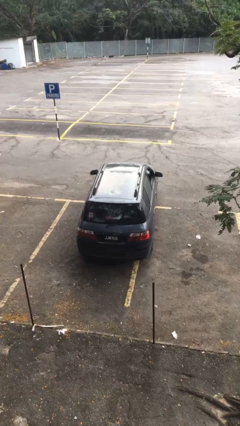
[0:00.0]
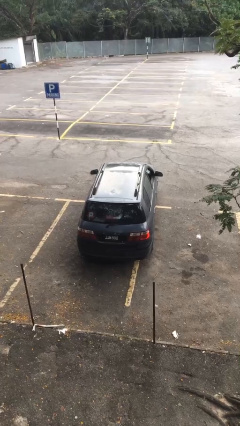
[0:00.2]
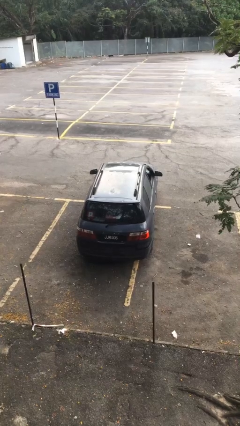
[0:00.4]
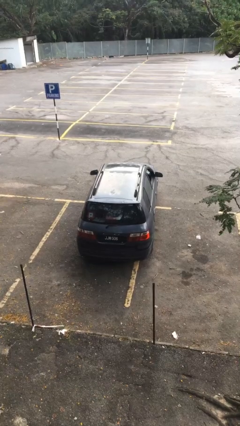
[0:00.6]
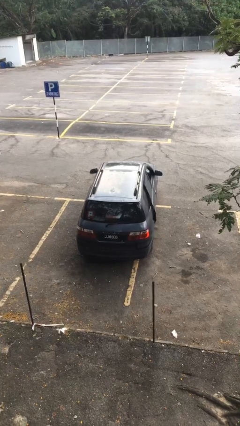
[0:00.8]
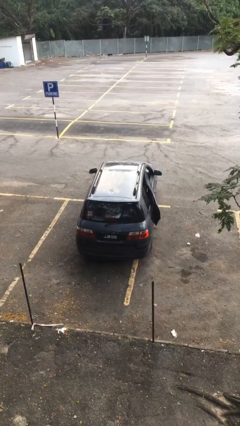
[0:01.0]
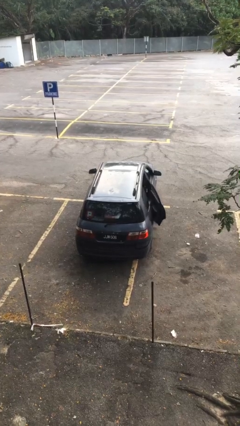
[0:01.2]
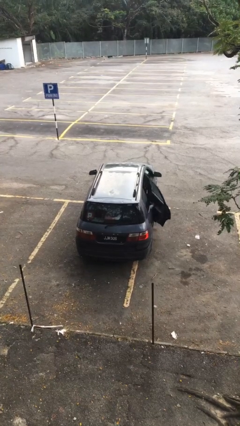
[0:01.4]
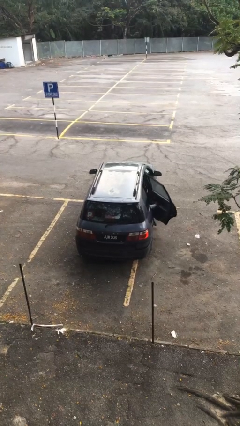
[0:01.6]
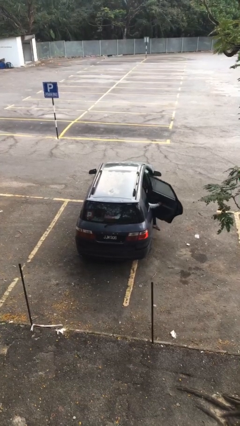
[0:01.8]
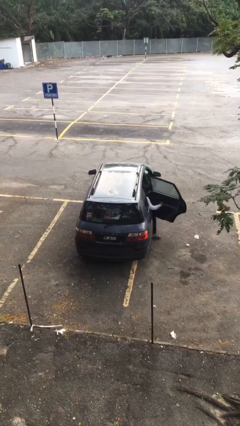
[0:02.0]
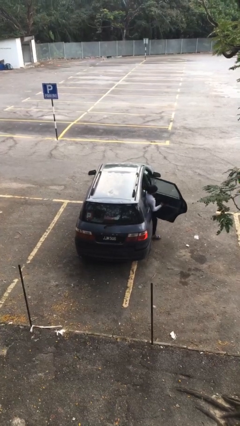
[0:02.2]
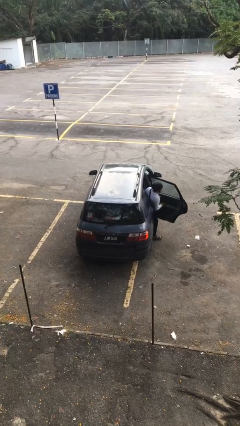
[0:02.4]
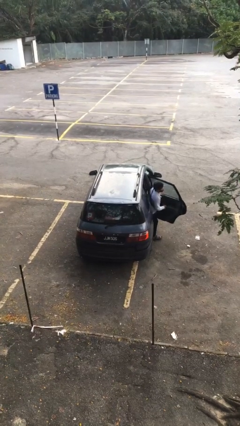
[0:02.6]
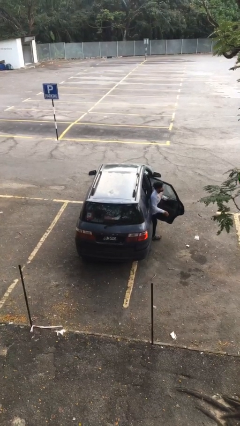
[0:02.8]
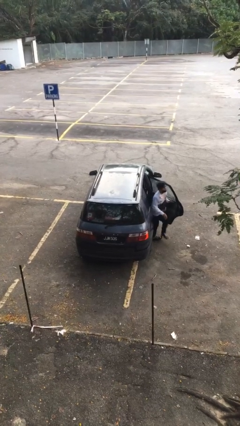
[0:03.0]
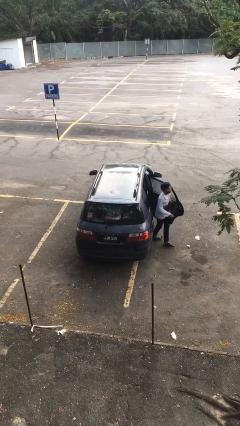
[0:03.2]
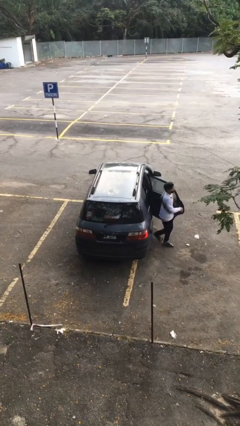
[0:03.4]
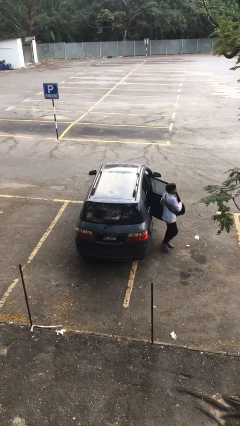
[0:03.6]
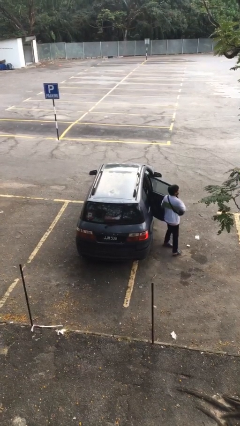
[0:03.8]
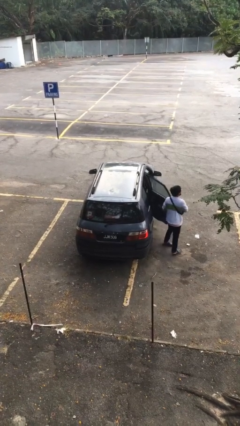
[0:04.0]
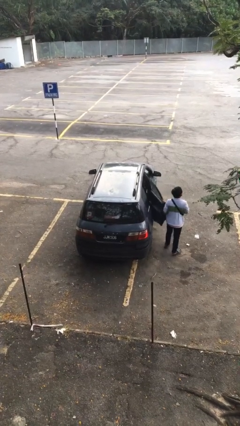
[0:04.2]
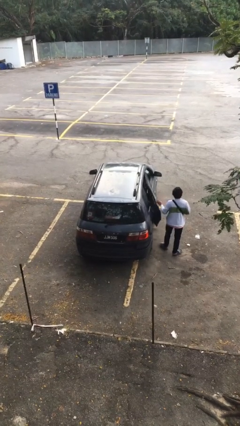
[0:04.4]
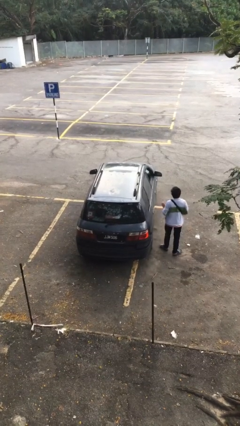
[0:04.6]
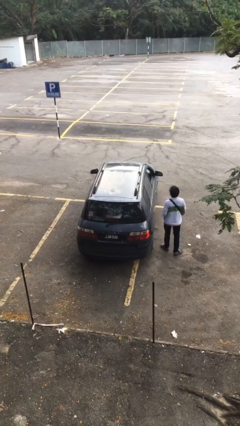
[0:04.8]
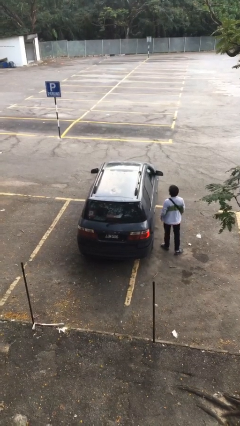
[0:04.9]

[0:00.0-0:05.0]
car drops off person

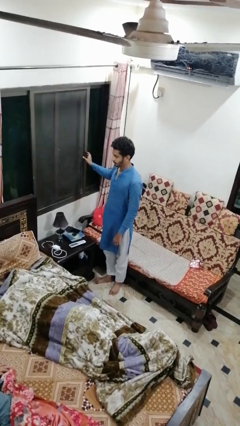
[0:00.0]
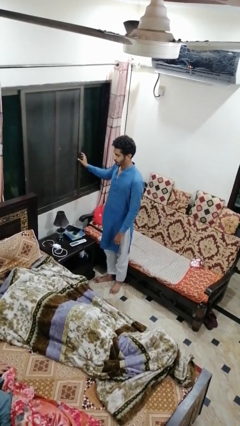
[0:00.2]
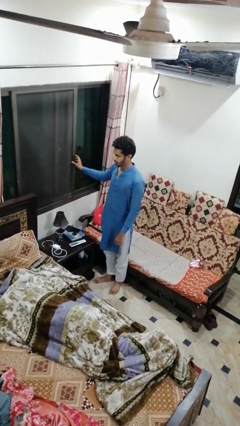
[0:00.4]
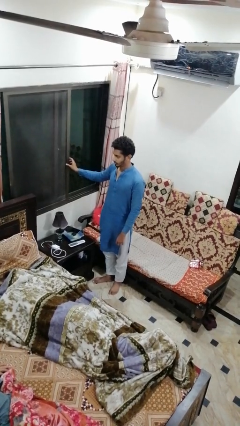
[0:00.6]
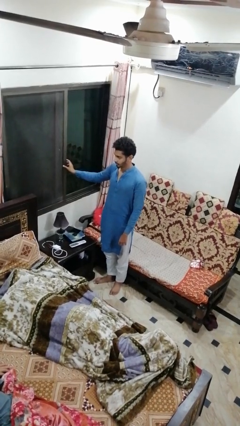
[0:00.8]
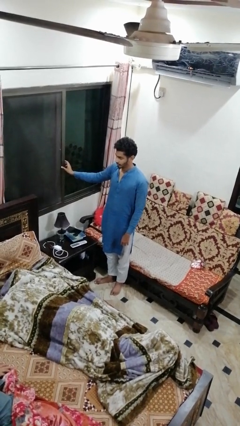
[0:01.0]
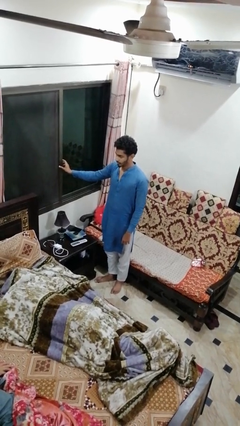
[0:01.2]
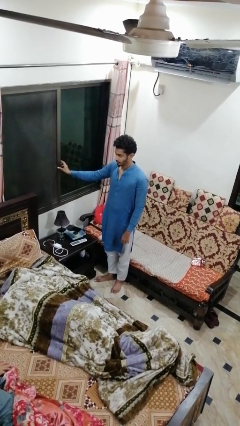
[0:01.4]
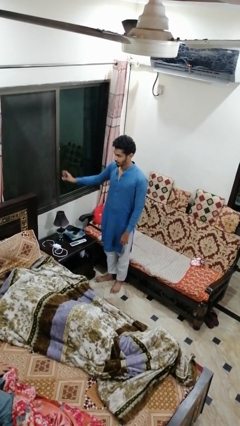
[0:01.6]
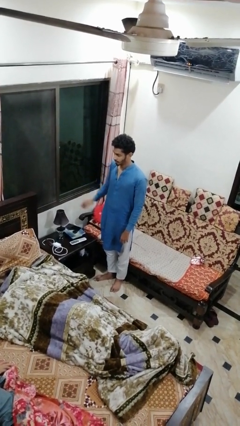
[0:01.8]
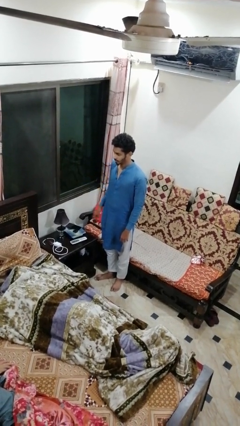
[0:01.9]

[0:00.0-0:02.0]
person closes home window

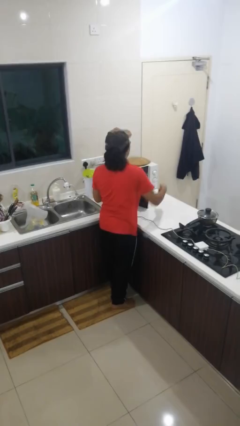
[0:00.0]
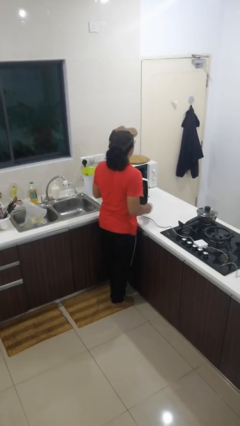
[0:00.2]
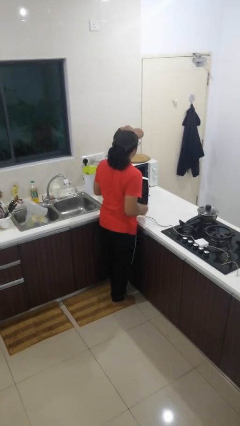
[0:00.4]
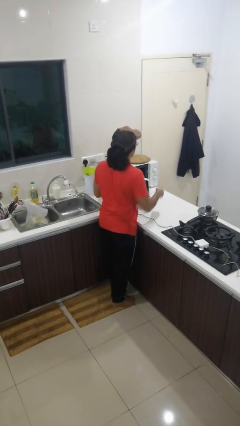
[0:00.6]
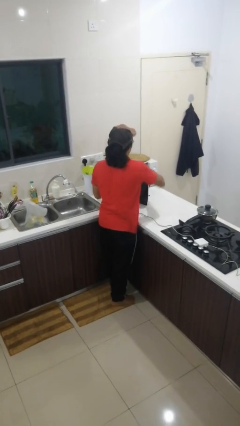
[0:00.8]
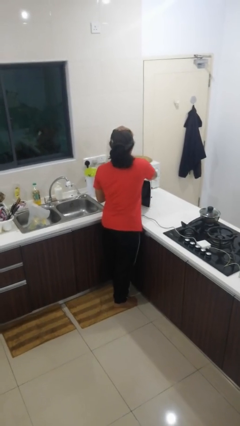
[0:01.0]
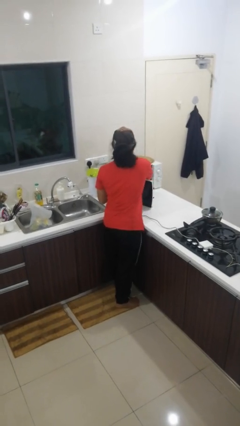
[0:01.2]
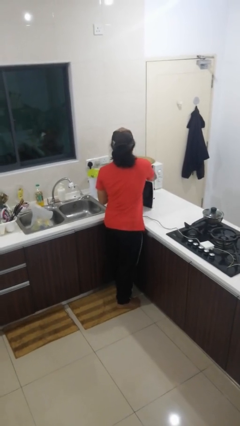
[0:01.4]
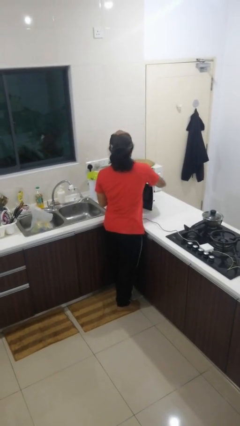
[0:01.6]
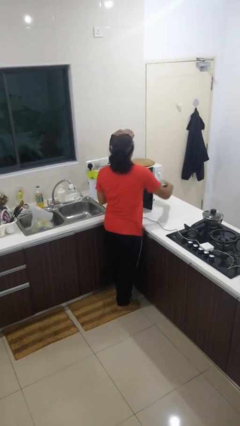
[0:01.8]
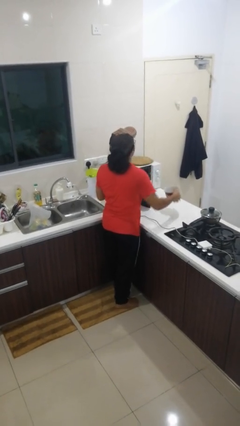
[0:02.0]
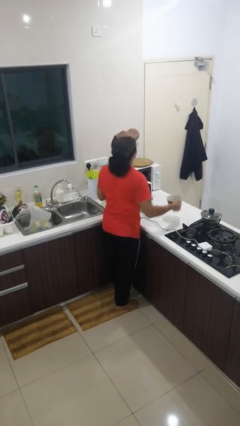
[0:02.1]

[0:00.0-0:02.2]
person takes object from microwave

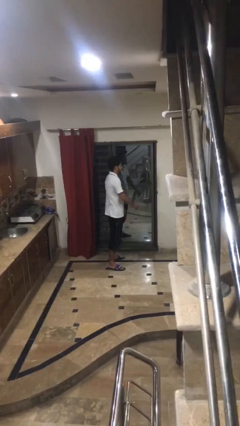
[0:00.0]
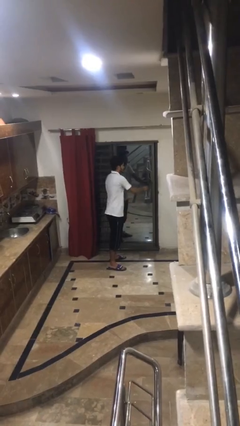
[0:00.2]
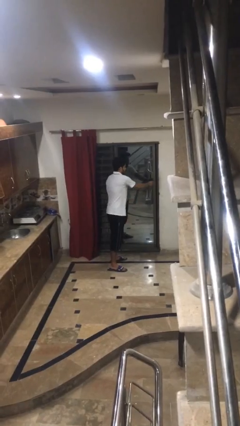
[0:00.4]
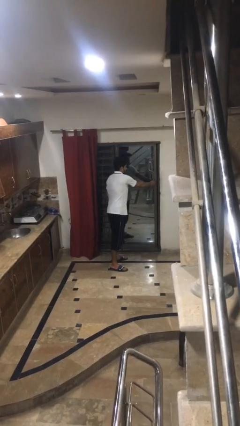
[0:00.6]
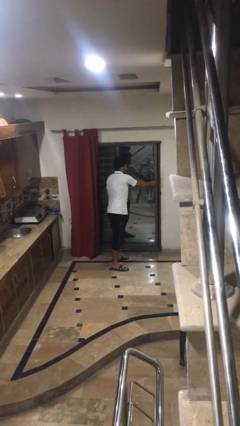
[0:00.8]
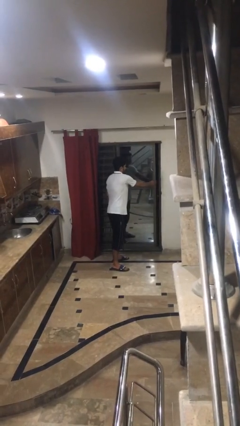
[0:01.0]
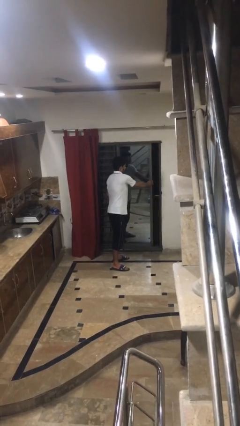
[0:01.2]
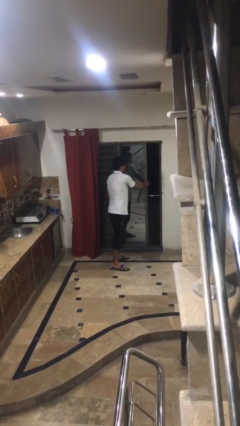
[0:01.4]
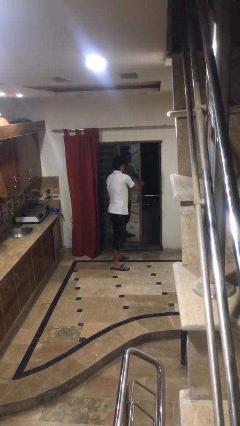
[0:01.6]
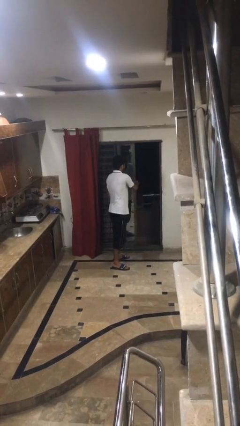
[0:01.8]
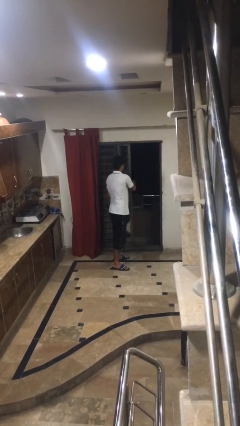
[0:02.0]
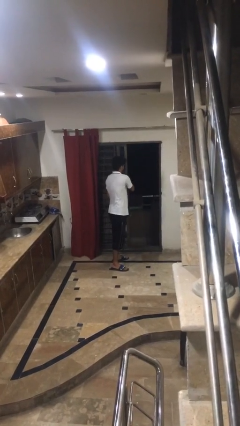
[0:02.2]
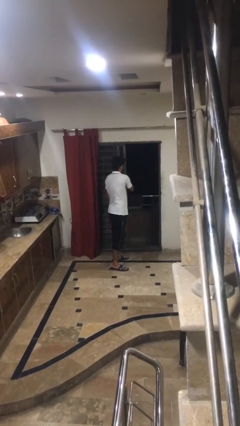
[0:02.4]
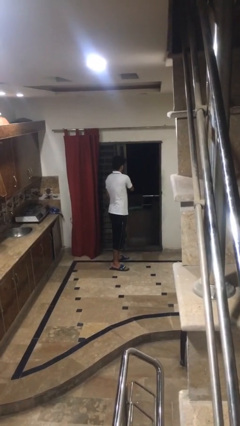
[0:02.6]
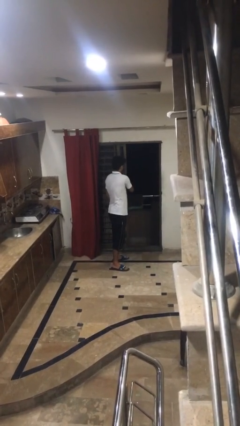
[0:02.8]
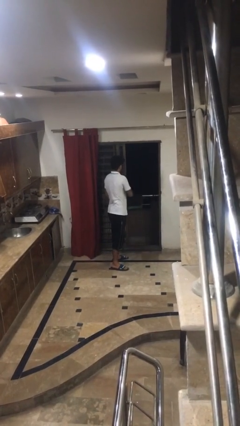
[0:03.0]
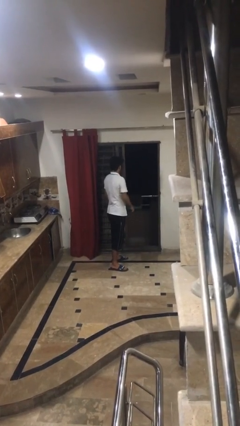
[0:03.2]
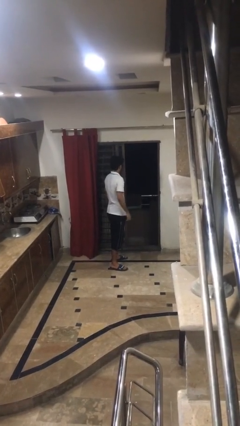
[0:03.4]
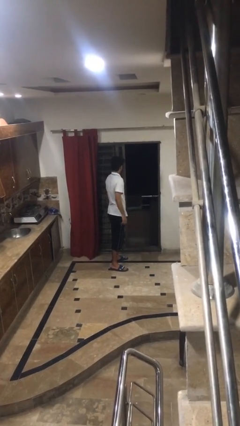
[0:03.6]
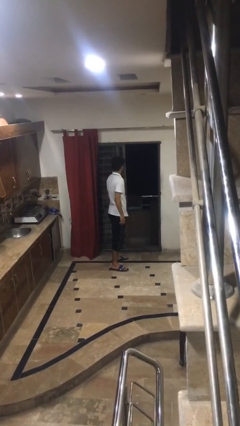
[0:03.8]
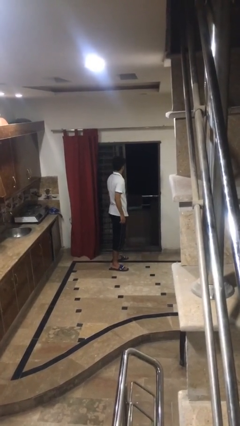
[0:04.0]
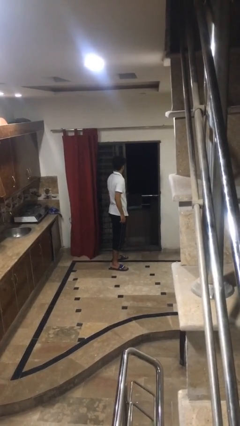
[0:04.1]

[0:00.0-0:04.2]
person opens sliding door

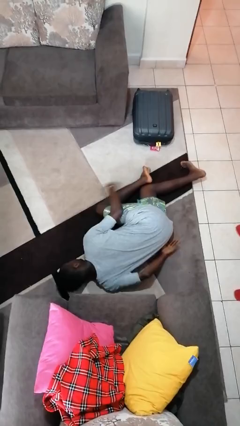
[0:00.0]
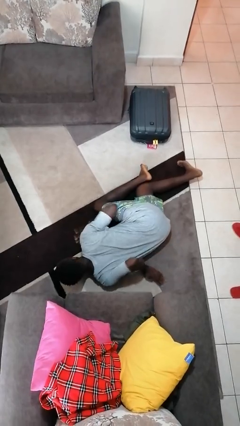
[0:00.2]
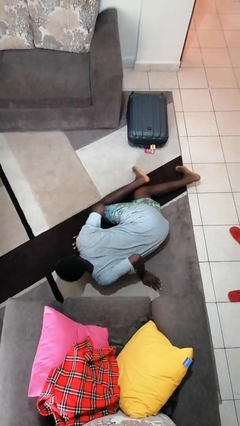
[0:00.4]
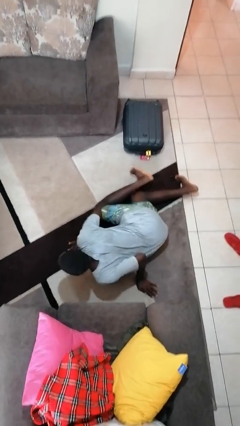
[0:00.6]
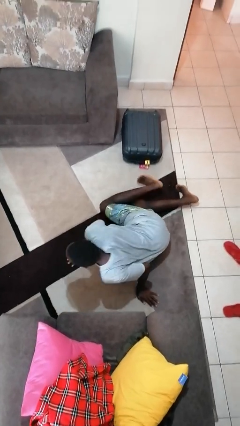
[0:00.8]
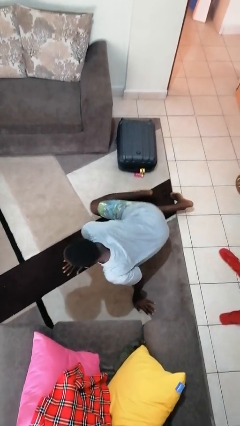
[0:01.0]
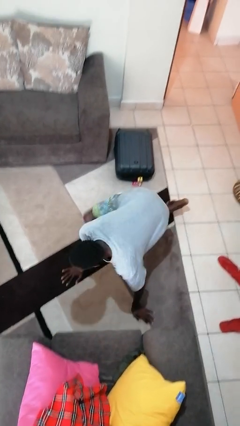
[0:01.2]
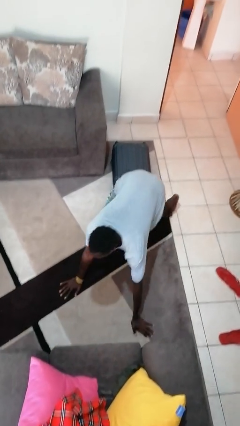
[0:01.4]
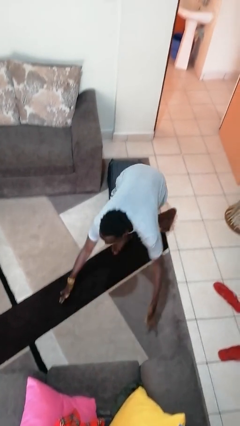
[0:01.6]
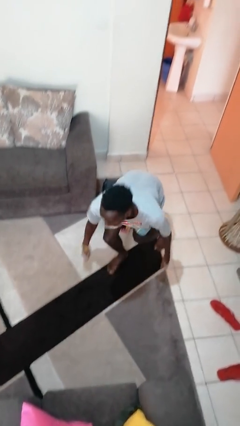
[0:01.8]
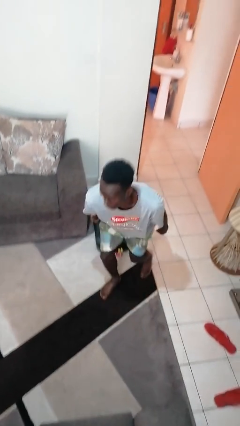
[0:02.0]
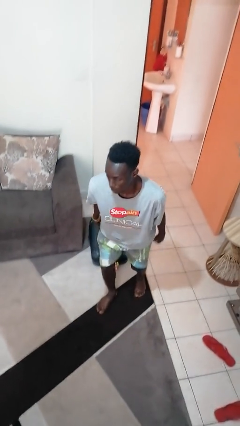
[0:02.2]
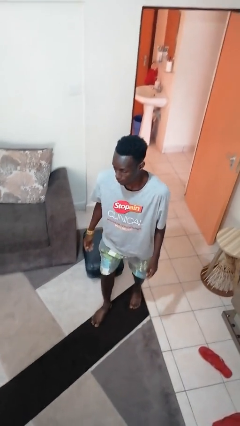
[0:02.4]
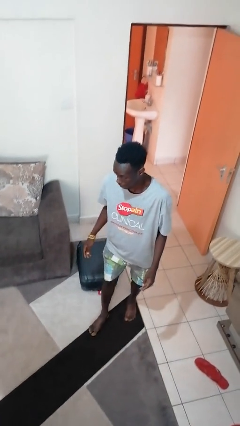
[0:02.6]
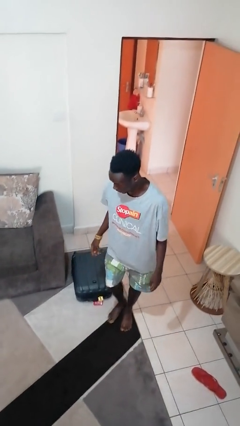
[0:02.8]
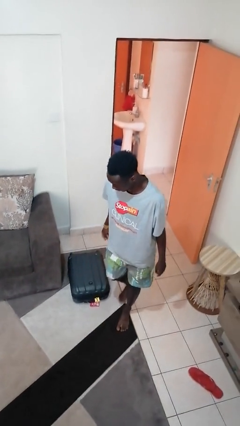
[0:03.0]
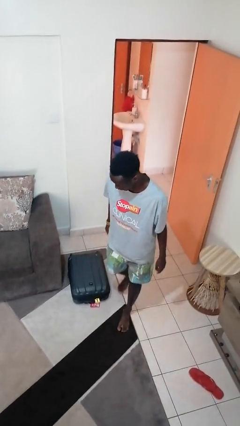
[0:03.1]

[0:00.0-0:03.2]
person stands up from floor

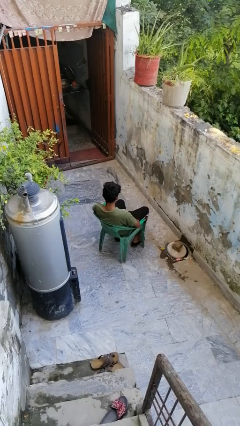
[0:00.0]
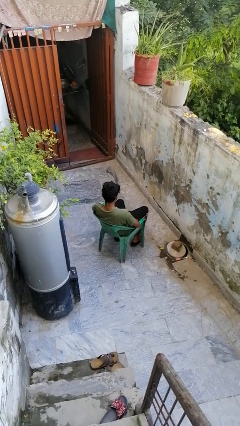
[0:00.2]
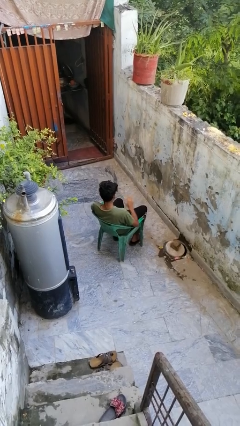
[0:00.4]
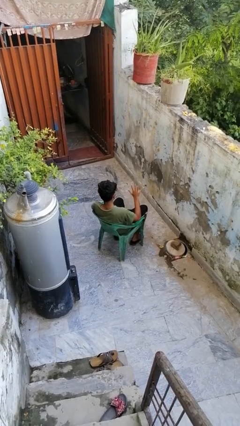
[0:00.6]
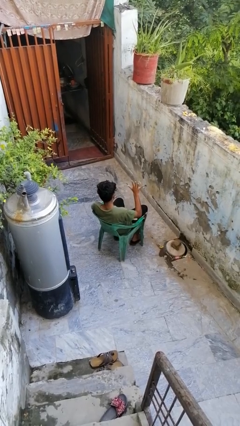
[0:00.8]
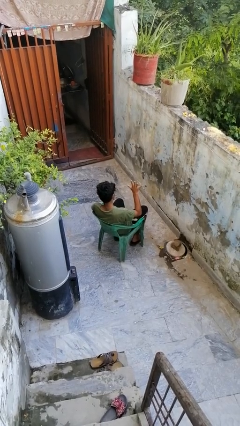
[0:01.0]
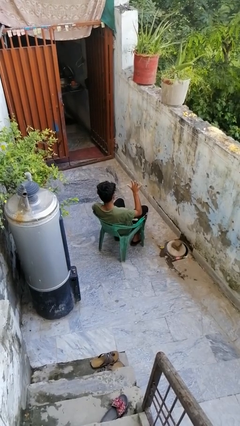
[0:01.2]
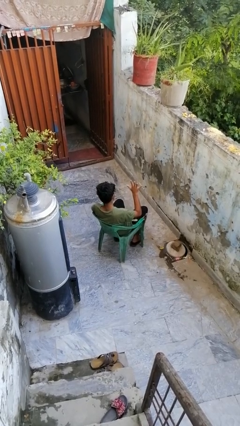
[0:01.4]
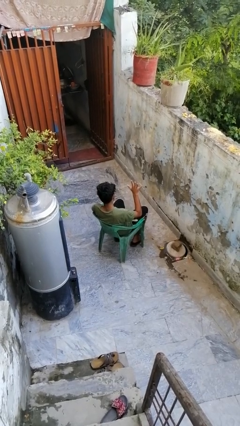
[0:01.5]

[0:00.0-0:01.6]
person gestures number five
